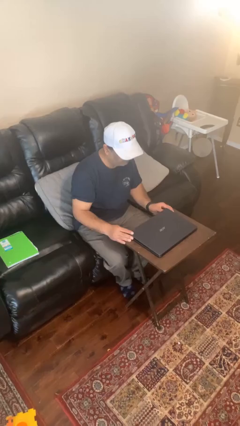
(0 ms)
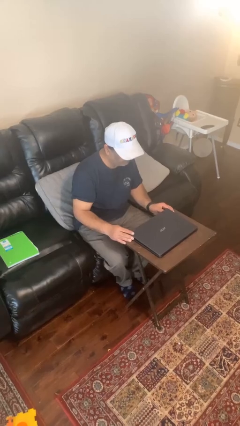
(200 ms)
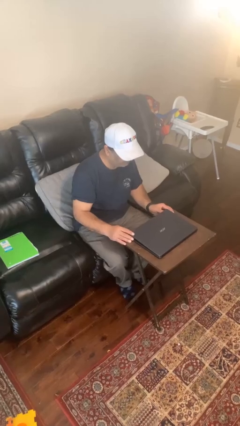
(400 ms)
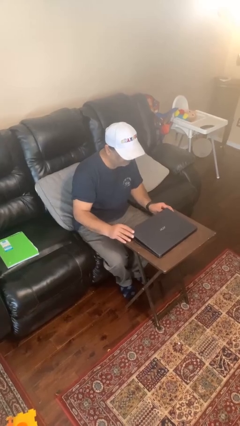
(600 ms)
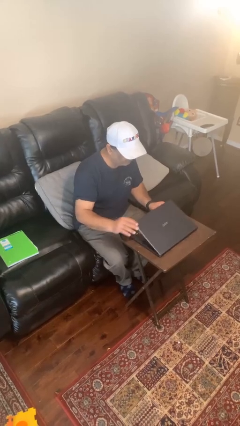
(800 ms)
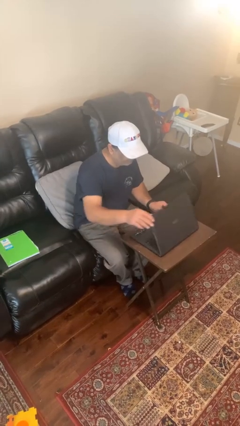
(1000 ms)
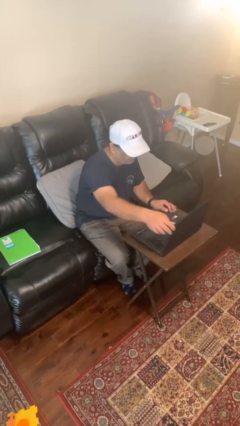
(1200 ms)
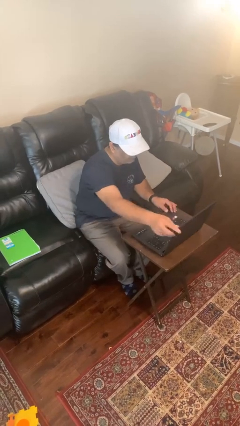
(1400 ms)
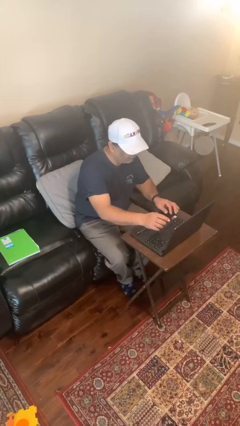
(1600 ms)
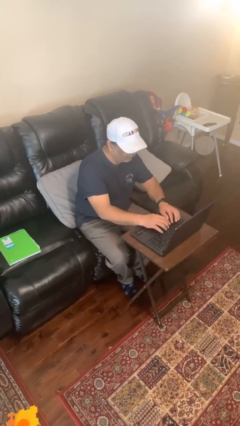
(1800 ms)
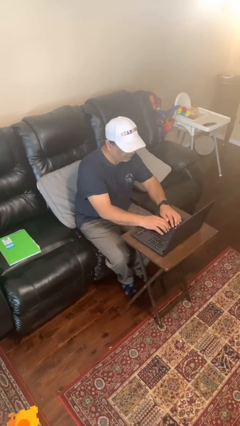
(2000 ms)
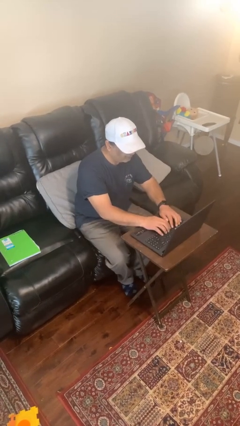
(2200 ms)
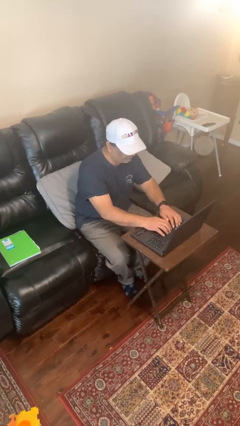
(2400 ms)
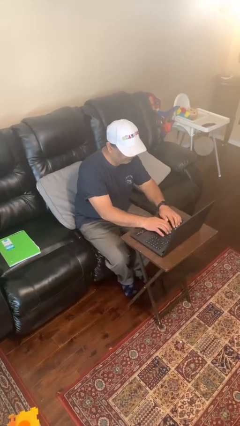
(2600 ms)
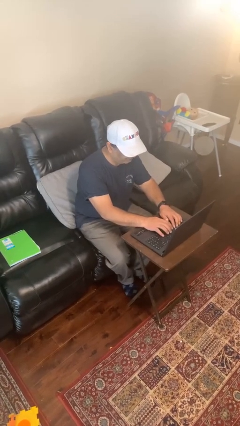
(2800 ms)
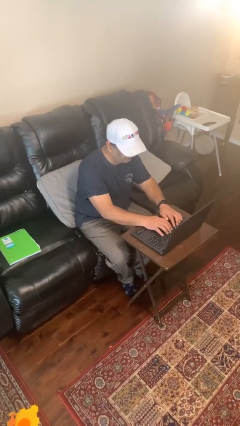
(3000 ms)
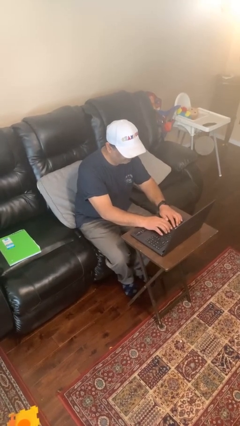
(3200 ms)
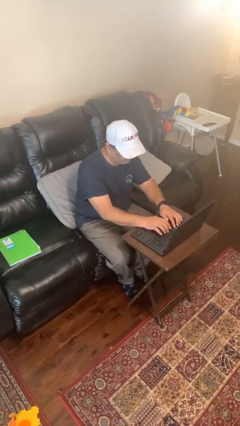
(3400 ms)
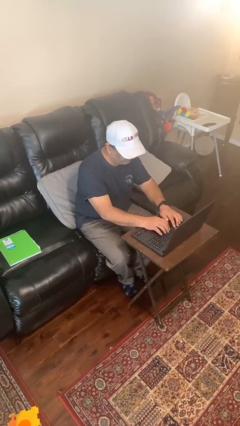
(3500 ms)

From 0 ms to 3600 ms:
person interacts with laptop

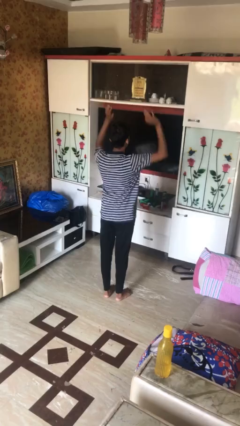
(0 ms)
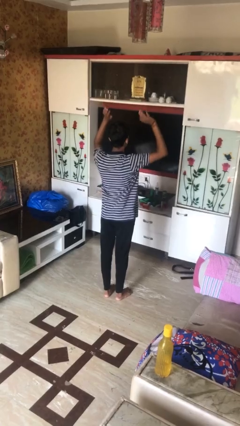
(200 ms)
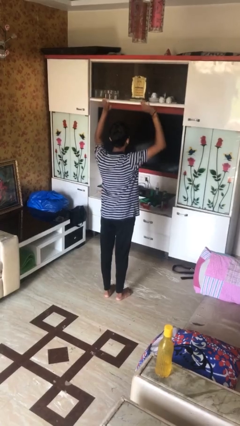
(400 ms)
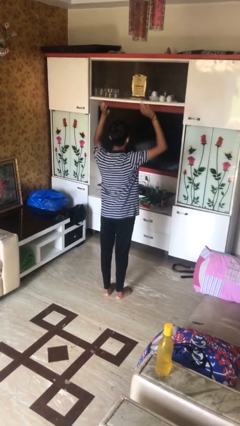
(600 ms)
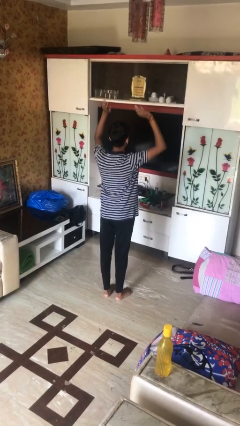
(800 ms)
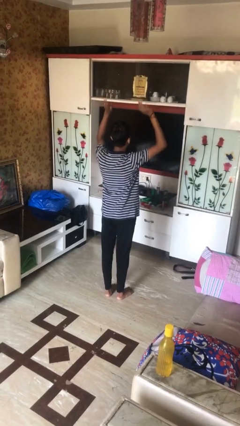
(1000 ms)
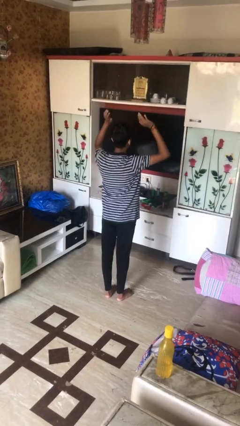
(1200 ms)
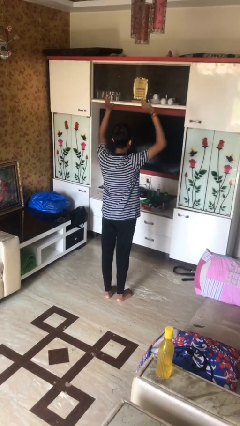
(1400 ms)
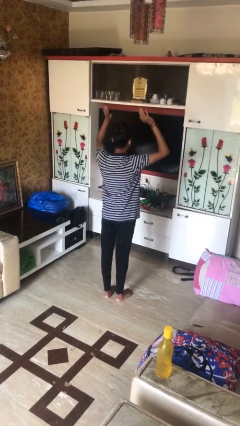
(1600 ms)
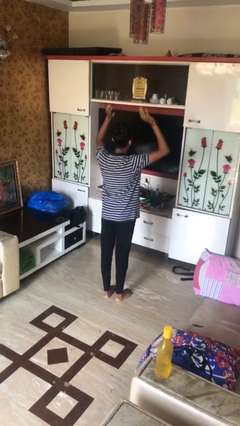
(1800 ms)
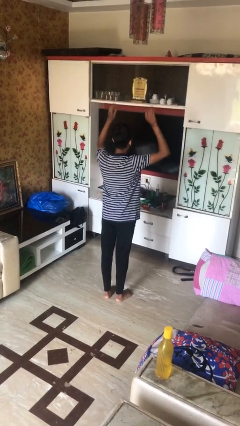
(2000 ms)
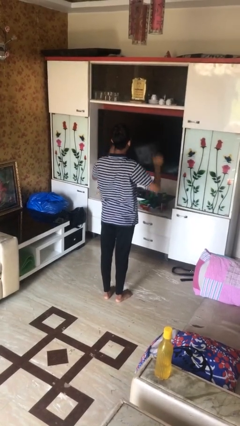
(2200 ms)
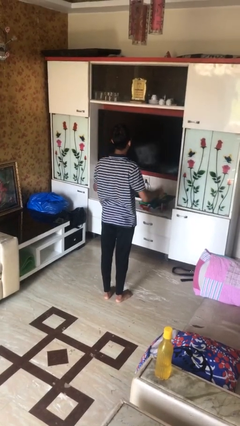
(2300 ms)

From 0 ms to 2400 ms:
person dances in place

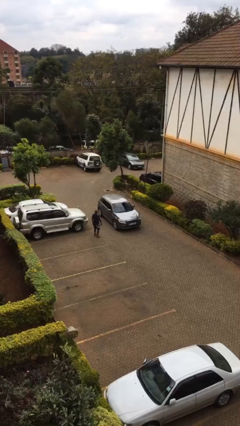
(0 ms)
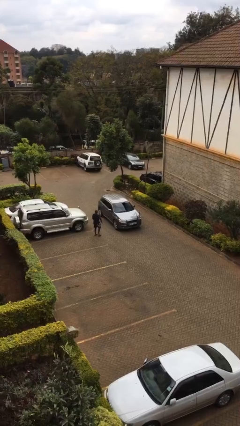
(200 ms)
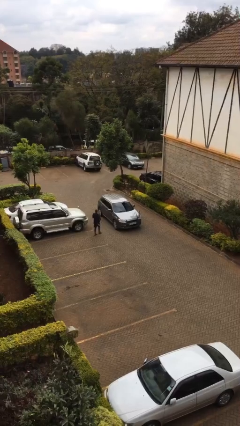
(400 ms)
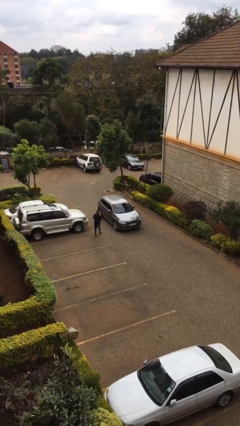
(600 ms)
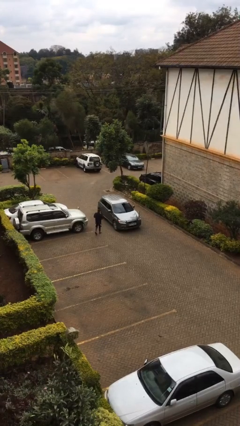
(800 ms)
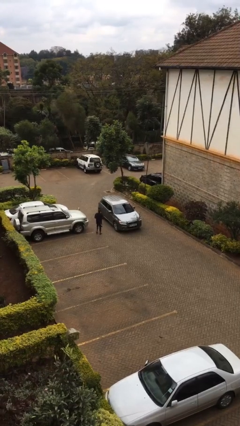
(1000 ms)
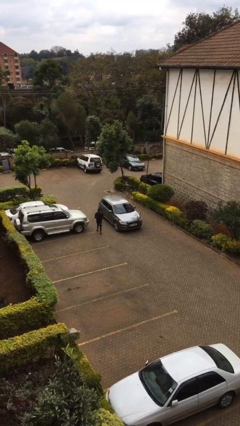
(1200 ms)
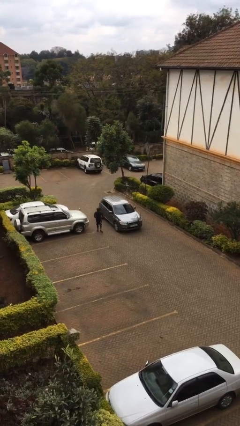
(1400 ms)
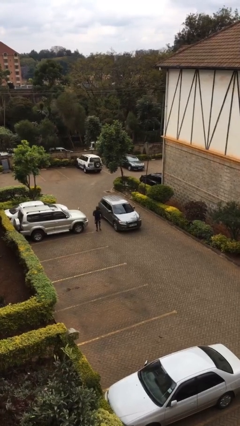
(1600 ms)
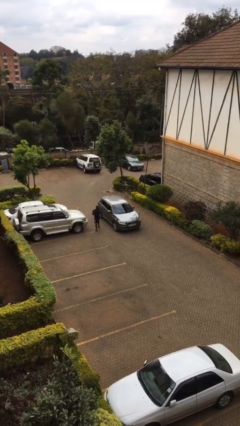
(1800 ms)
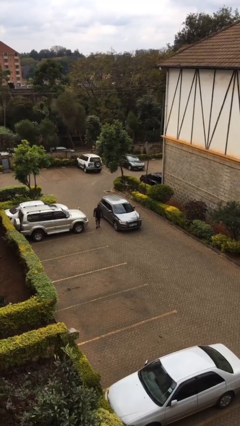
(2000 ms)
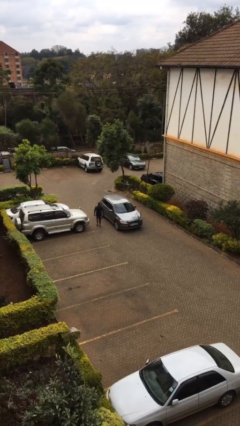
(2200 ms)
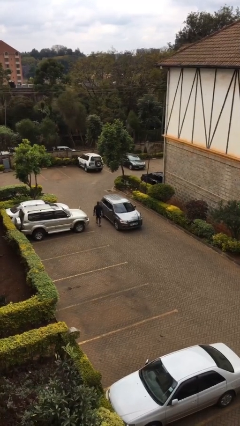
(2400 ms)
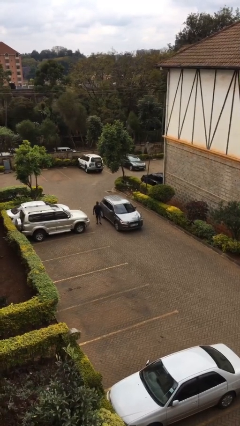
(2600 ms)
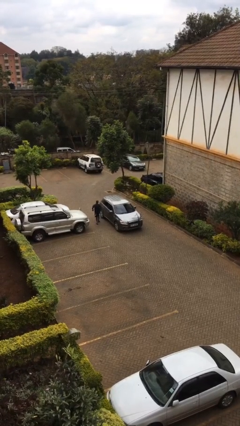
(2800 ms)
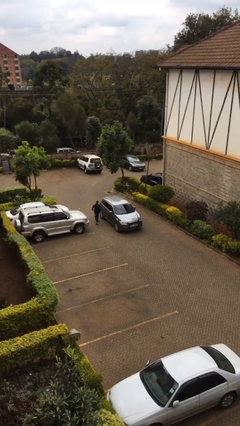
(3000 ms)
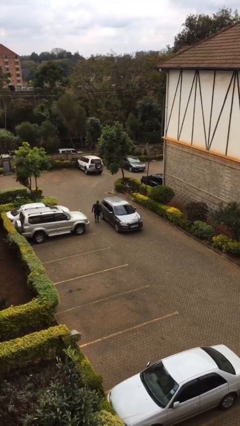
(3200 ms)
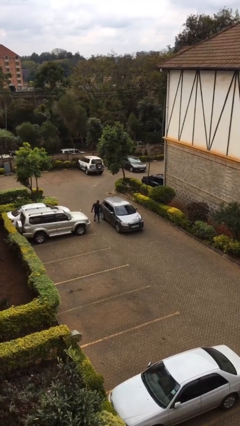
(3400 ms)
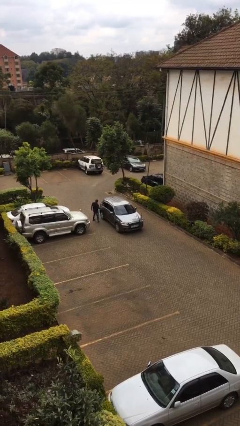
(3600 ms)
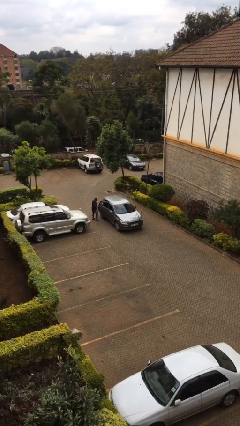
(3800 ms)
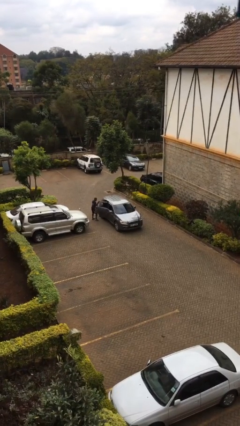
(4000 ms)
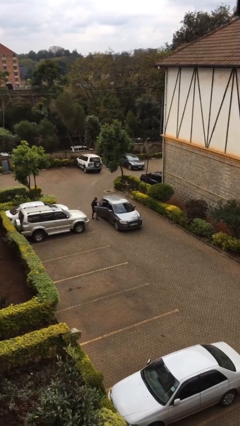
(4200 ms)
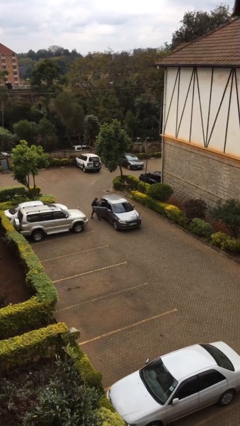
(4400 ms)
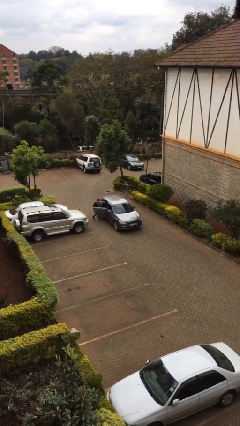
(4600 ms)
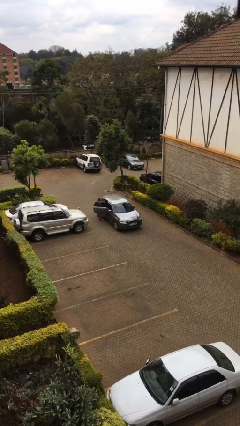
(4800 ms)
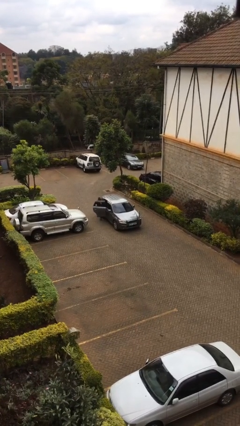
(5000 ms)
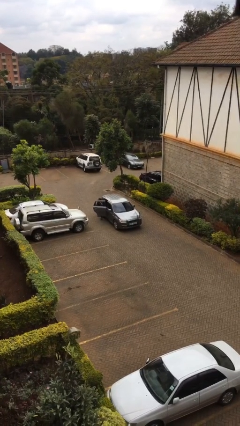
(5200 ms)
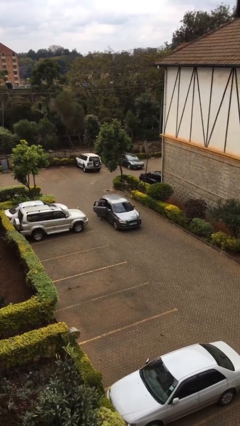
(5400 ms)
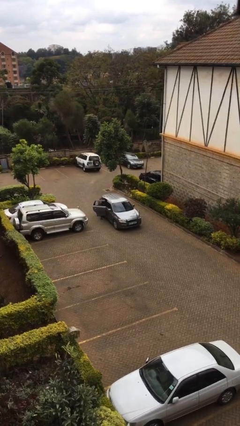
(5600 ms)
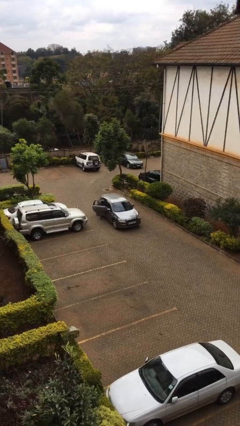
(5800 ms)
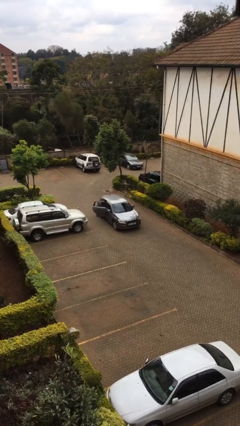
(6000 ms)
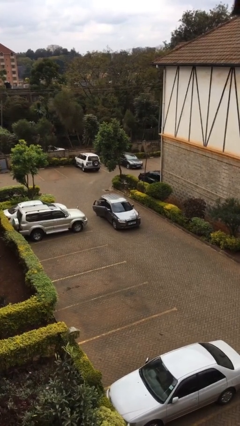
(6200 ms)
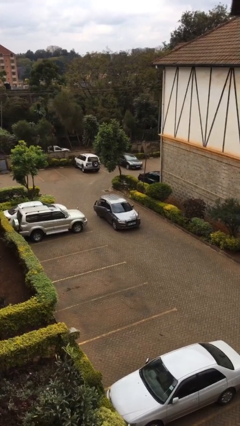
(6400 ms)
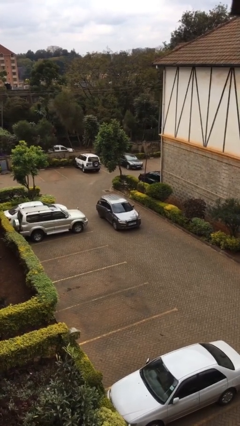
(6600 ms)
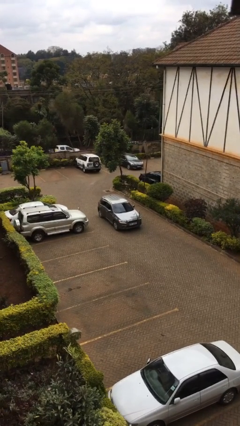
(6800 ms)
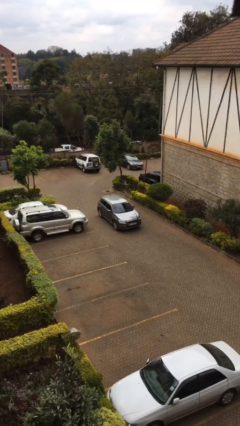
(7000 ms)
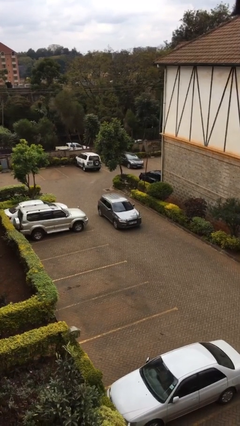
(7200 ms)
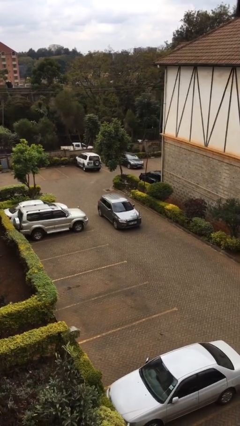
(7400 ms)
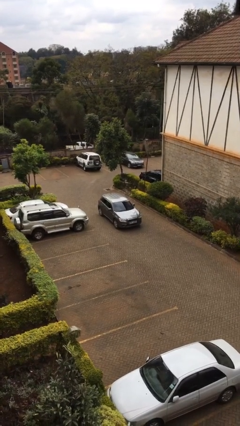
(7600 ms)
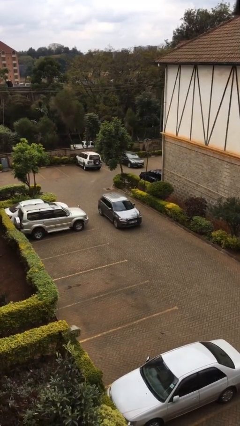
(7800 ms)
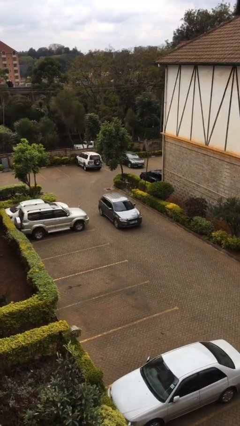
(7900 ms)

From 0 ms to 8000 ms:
car picks up person

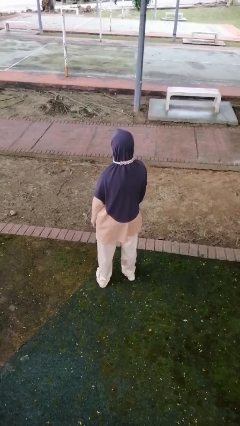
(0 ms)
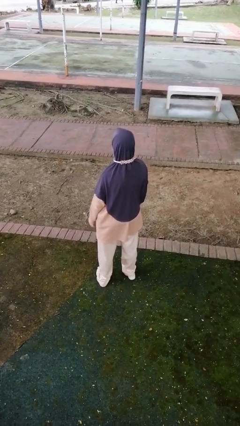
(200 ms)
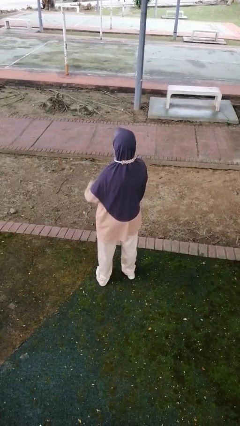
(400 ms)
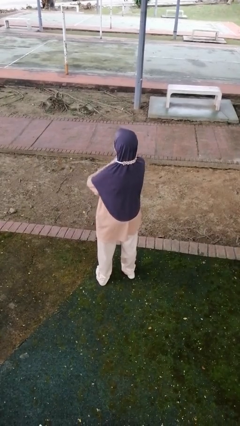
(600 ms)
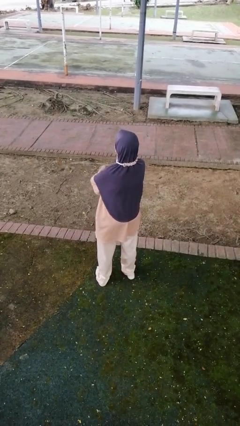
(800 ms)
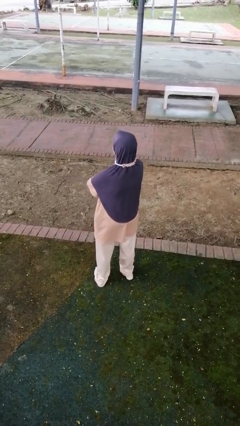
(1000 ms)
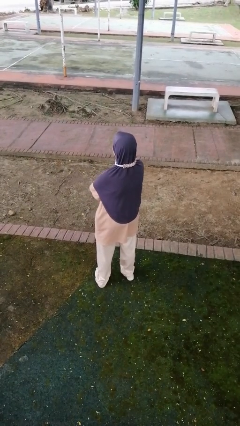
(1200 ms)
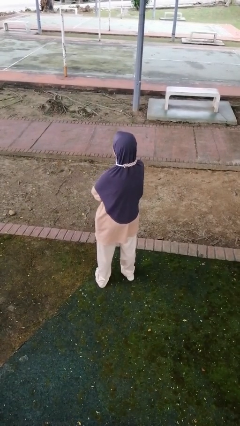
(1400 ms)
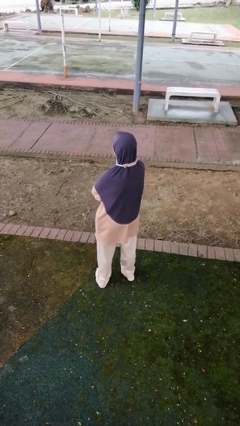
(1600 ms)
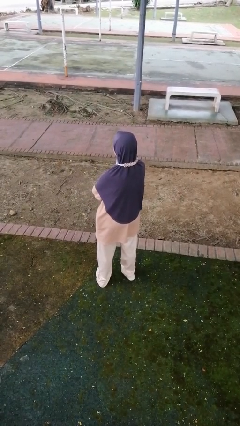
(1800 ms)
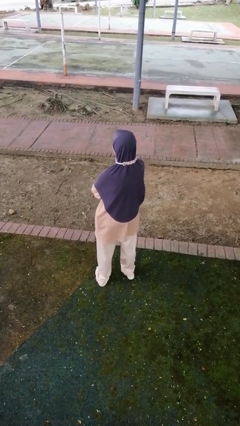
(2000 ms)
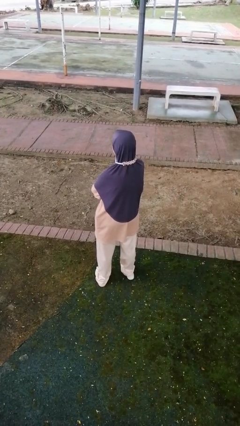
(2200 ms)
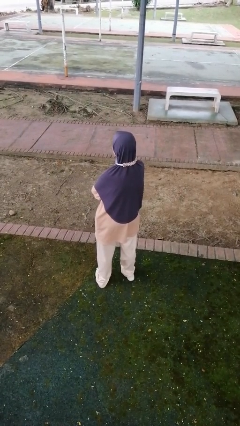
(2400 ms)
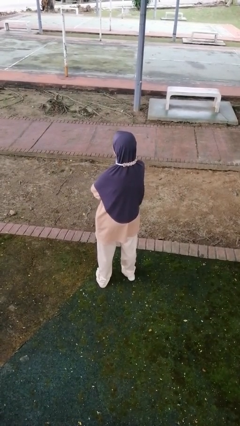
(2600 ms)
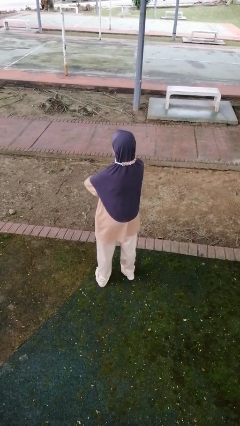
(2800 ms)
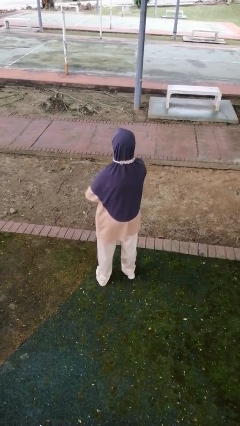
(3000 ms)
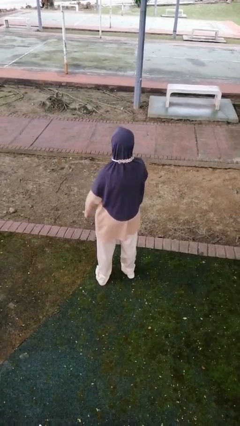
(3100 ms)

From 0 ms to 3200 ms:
person crosses arms
